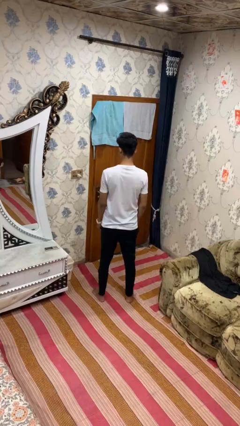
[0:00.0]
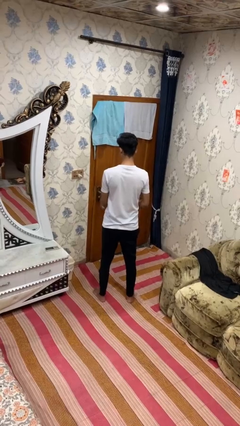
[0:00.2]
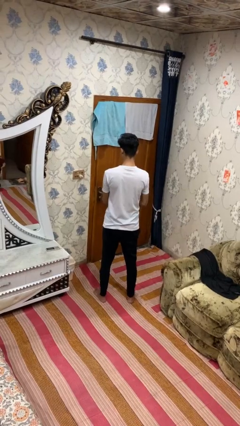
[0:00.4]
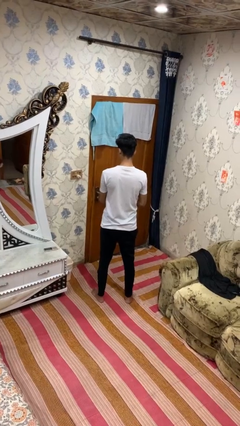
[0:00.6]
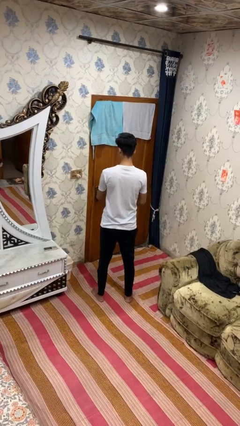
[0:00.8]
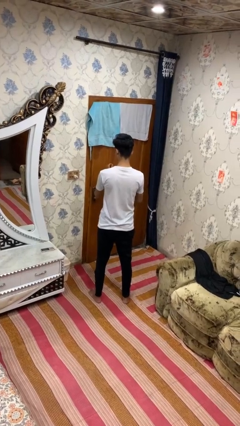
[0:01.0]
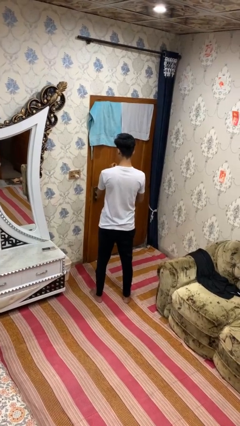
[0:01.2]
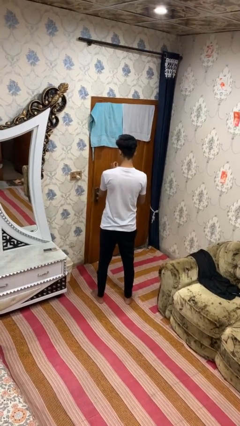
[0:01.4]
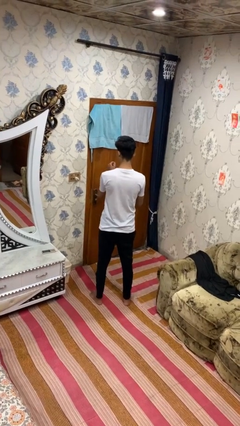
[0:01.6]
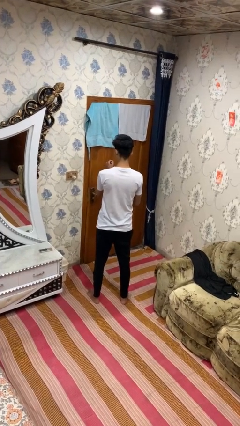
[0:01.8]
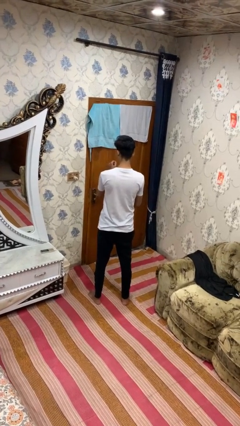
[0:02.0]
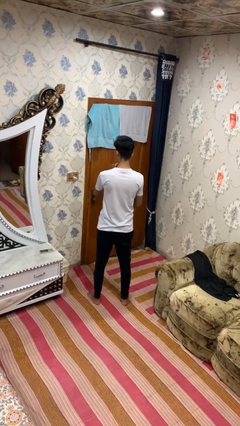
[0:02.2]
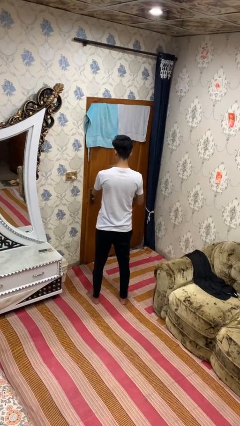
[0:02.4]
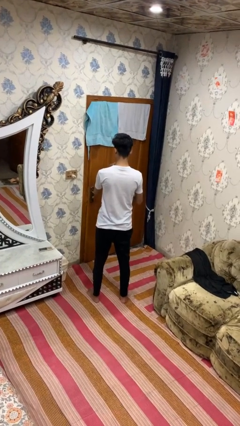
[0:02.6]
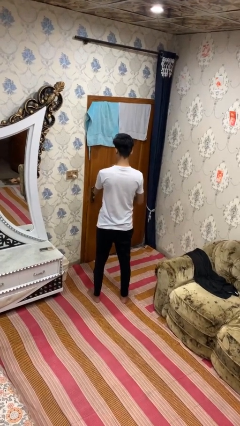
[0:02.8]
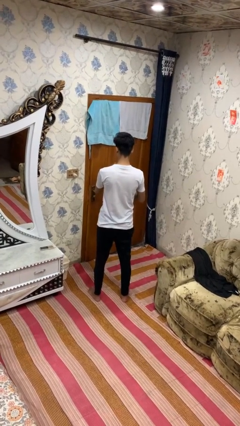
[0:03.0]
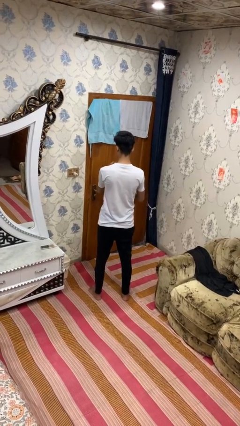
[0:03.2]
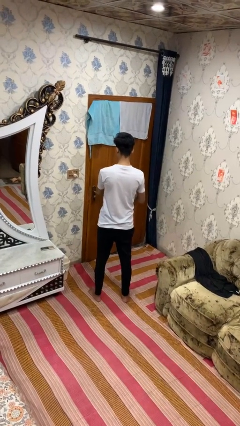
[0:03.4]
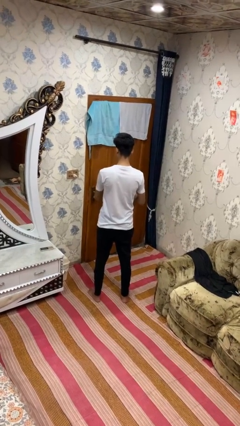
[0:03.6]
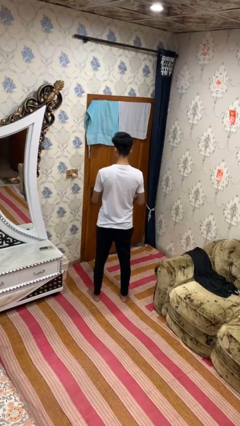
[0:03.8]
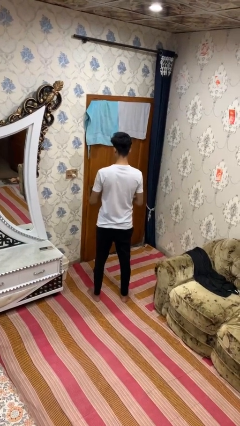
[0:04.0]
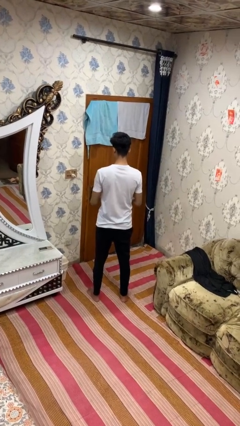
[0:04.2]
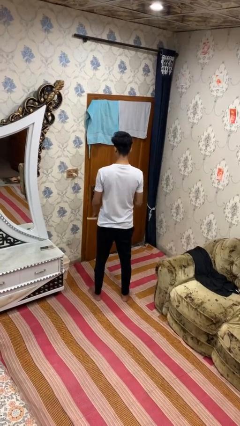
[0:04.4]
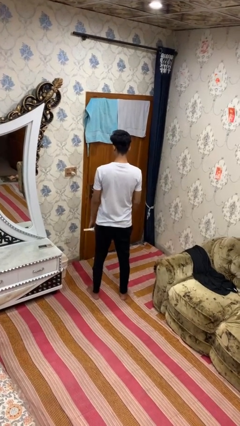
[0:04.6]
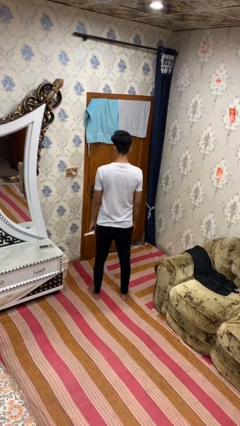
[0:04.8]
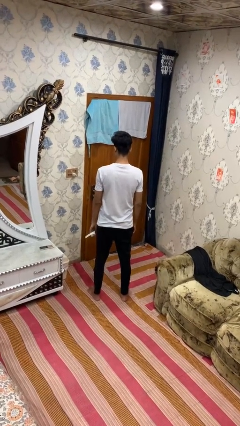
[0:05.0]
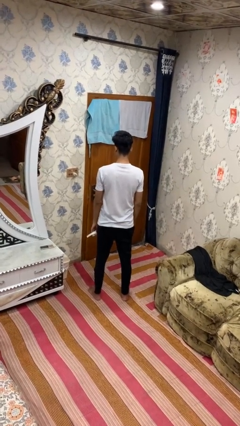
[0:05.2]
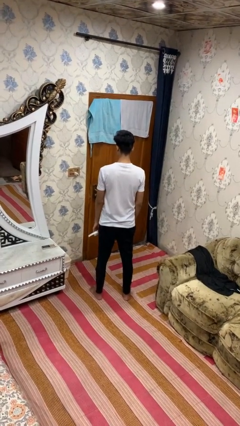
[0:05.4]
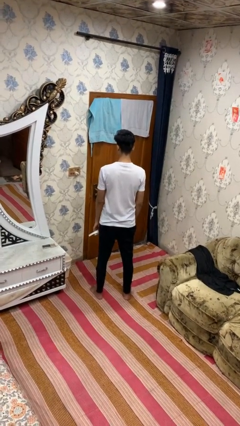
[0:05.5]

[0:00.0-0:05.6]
person takes off wristwatch

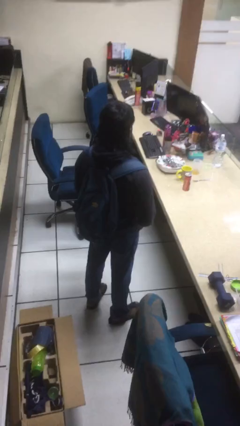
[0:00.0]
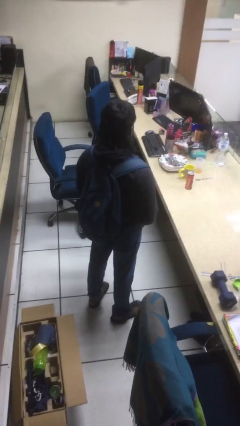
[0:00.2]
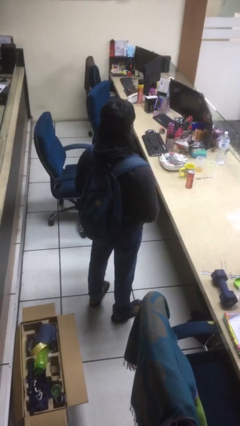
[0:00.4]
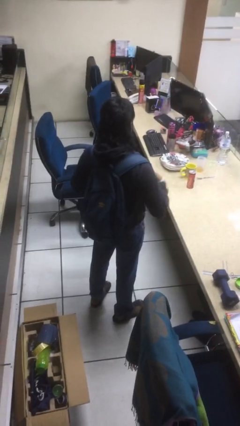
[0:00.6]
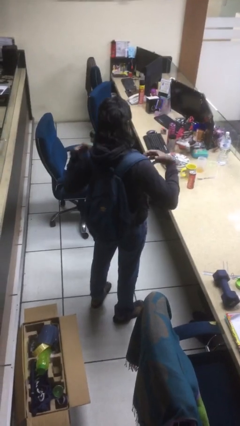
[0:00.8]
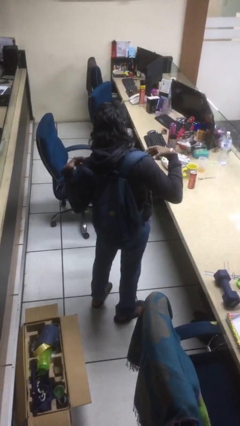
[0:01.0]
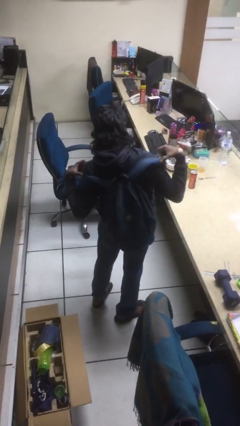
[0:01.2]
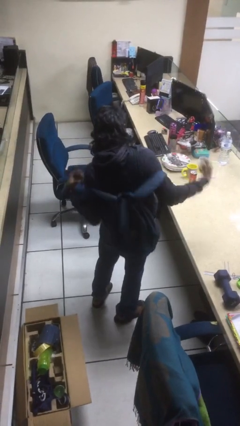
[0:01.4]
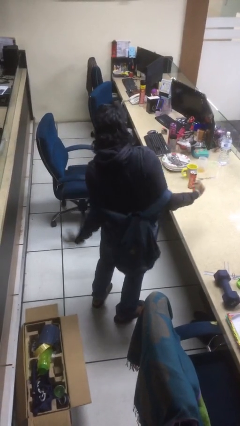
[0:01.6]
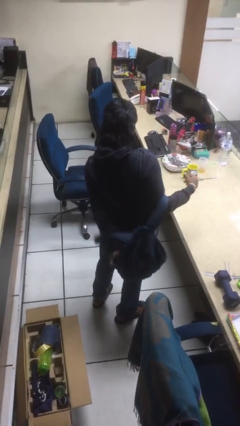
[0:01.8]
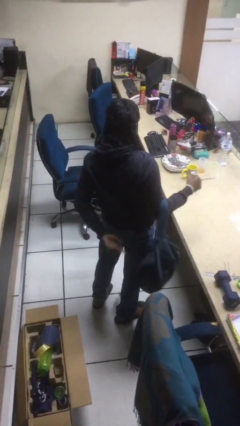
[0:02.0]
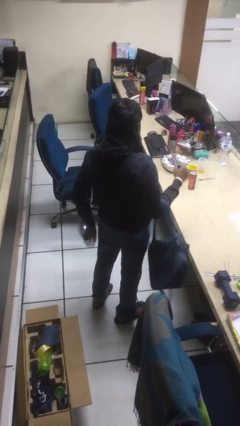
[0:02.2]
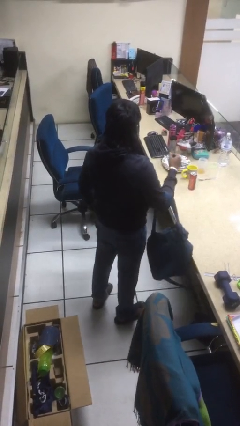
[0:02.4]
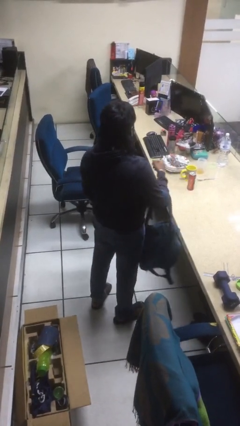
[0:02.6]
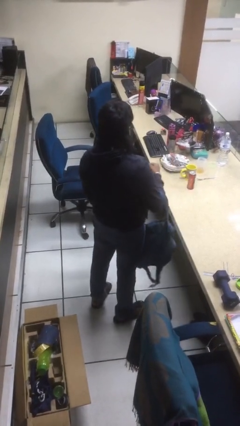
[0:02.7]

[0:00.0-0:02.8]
person takes off backpack

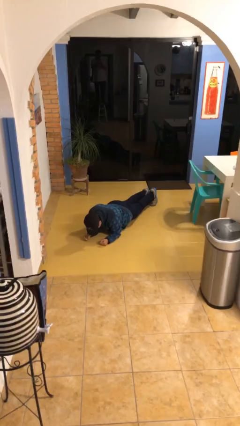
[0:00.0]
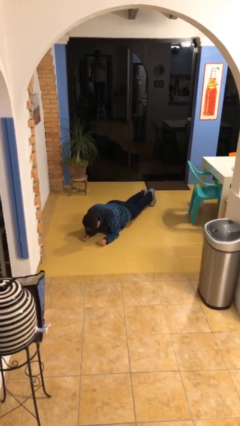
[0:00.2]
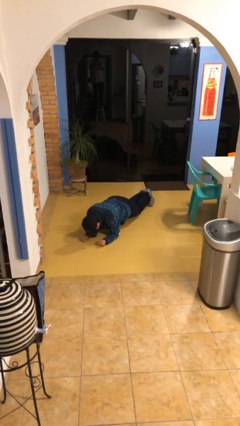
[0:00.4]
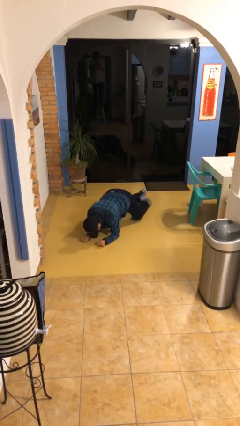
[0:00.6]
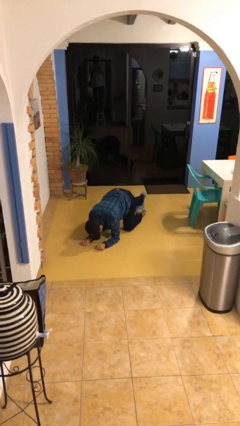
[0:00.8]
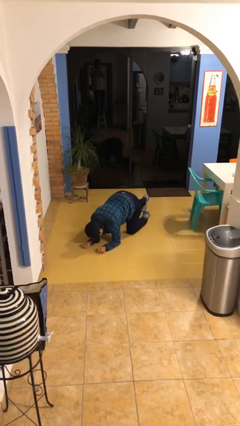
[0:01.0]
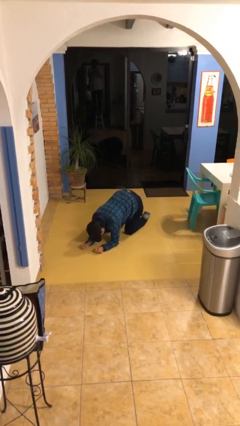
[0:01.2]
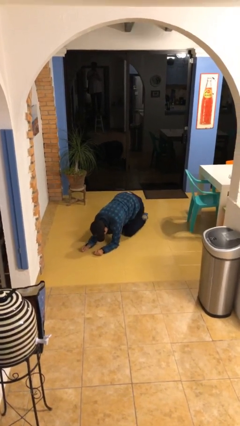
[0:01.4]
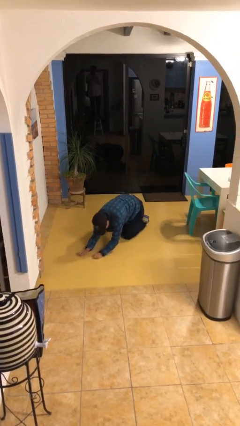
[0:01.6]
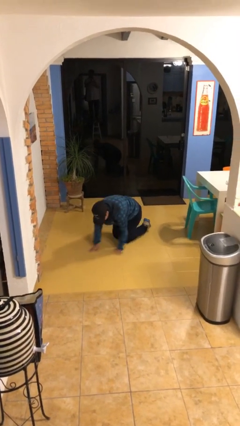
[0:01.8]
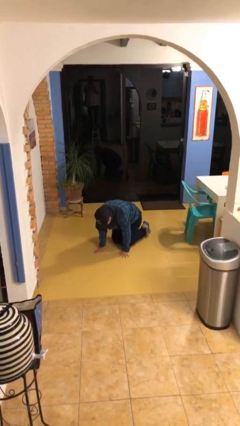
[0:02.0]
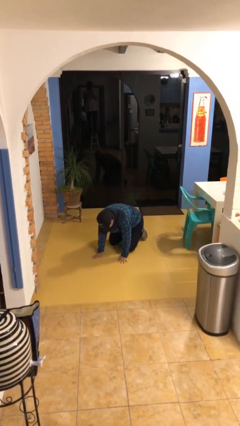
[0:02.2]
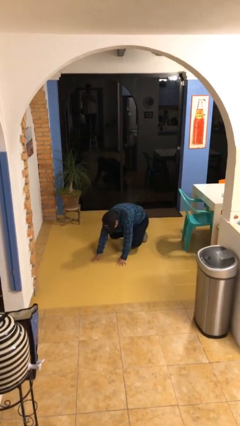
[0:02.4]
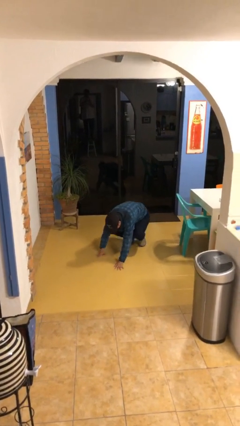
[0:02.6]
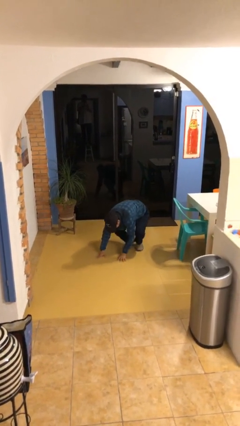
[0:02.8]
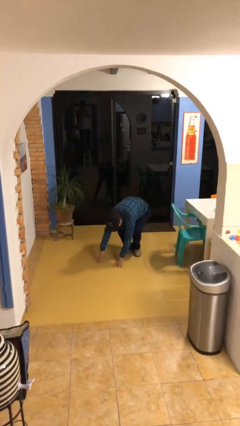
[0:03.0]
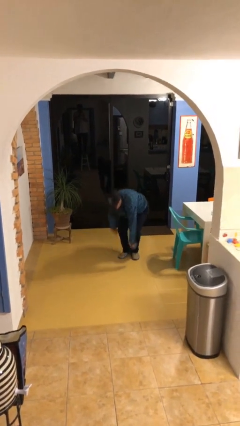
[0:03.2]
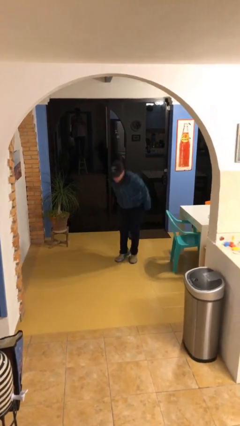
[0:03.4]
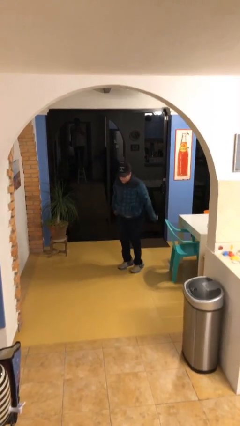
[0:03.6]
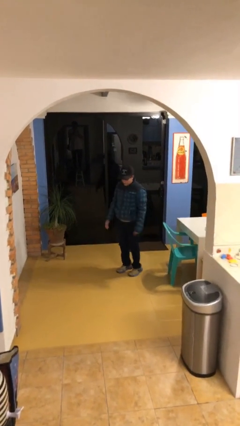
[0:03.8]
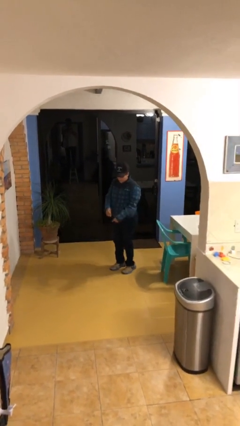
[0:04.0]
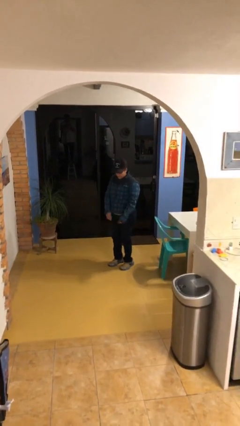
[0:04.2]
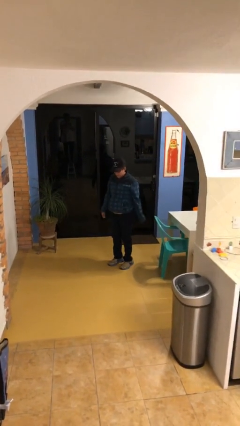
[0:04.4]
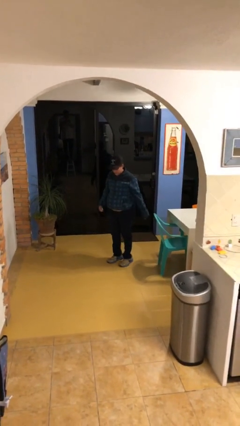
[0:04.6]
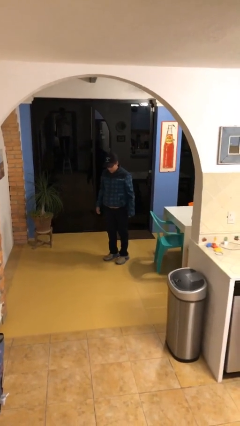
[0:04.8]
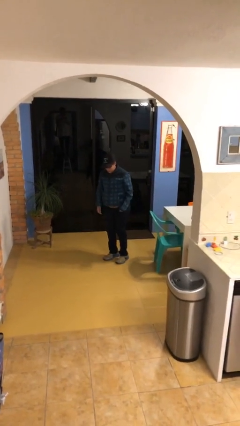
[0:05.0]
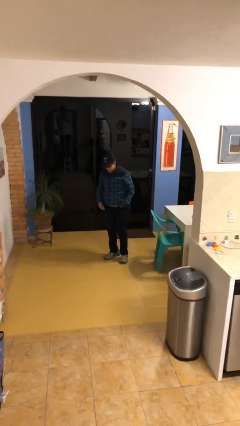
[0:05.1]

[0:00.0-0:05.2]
person stands up from floor

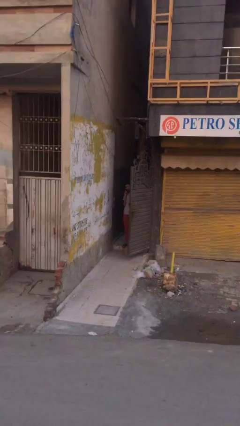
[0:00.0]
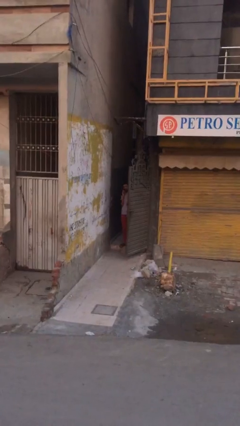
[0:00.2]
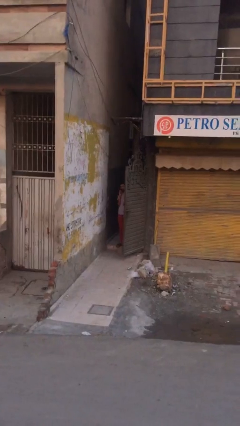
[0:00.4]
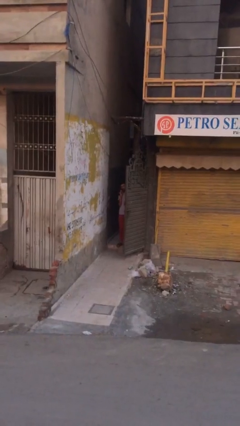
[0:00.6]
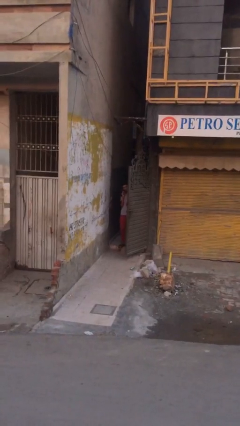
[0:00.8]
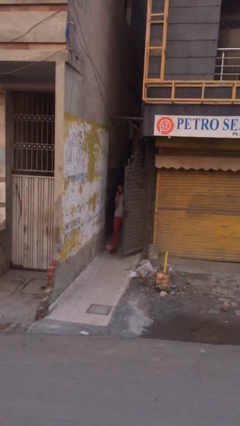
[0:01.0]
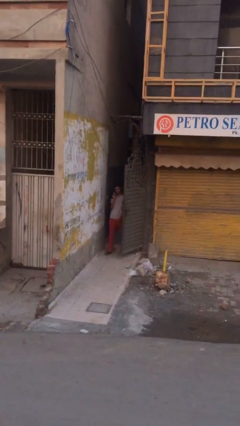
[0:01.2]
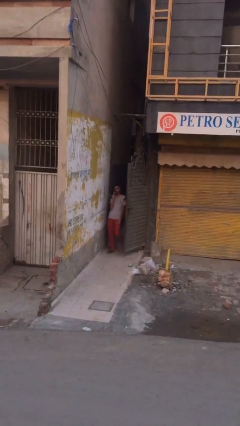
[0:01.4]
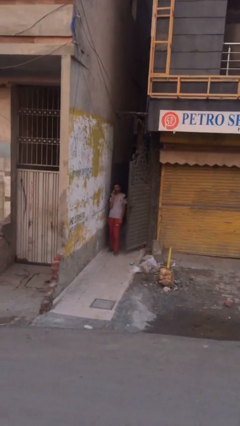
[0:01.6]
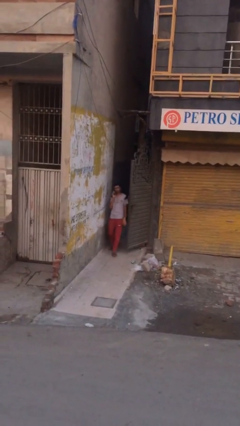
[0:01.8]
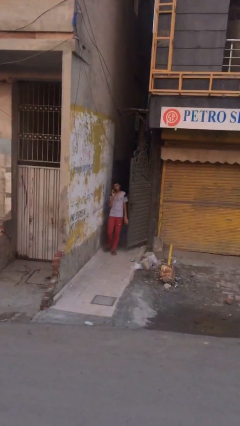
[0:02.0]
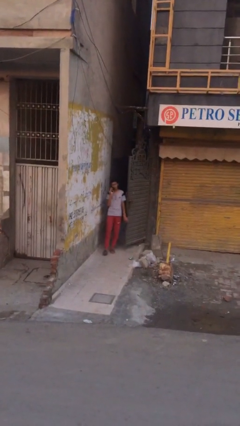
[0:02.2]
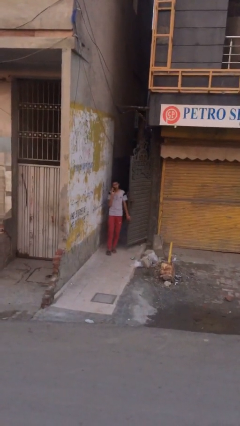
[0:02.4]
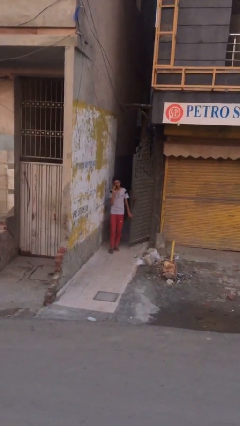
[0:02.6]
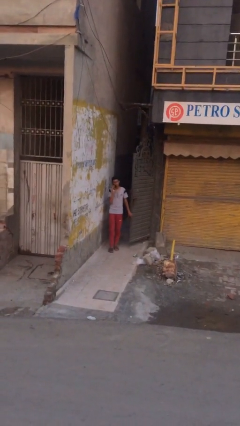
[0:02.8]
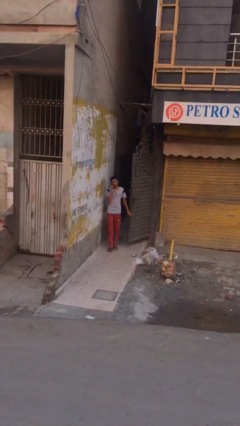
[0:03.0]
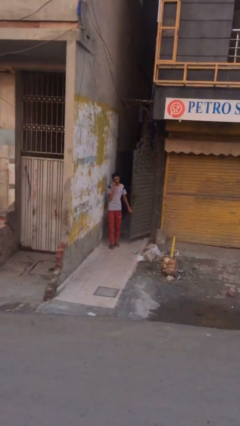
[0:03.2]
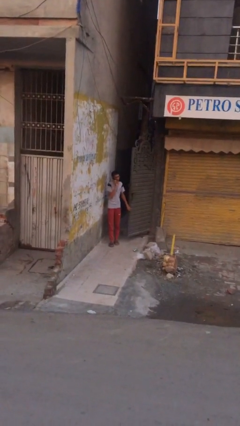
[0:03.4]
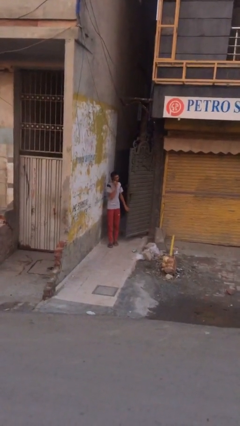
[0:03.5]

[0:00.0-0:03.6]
person enters scene through structure

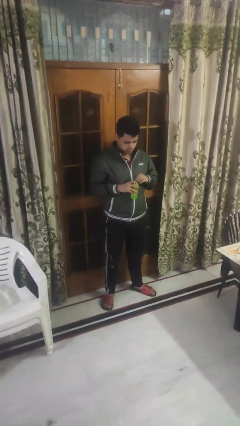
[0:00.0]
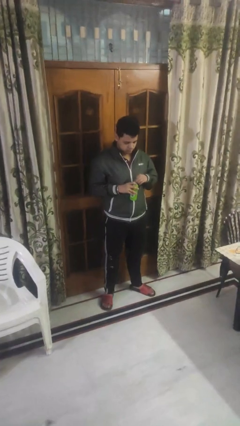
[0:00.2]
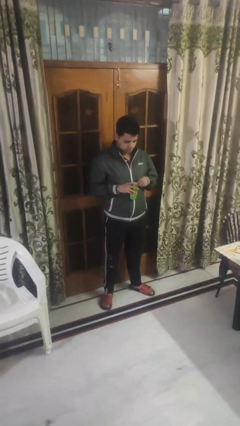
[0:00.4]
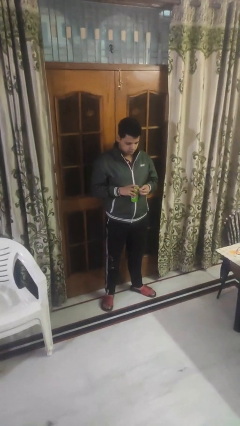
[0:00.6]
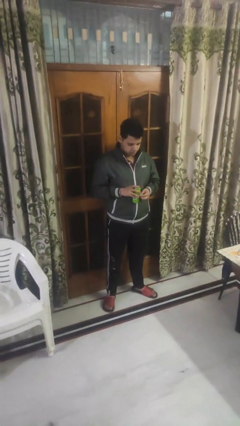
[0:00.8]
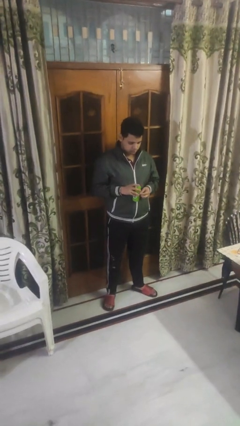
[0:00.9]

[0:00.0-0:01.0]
person opens beverage can
